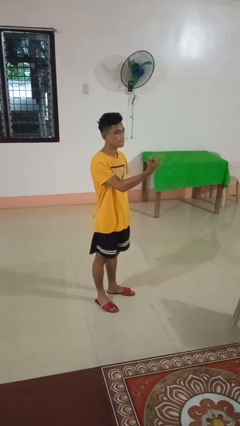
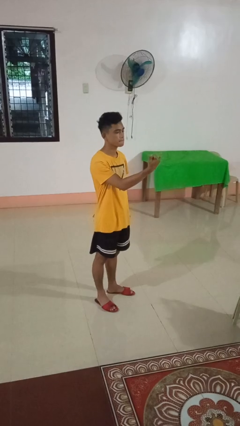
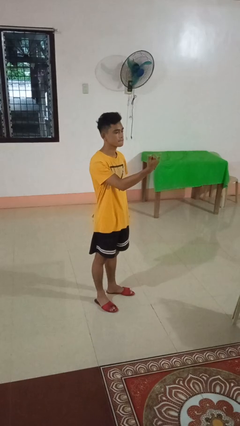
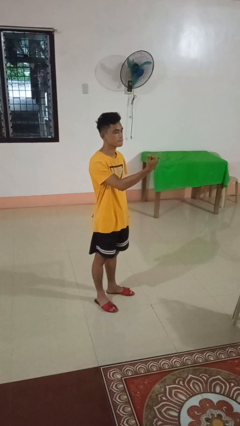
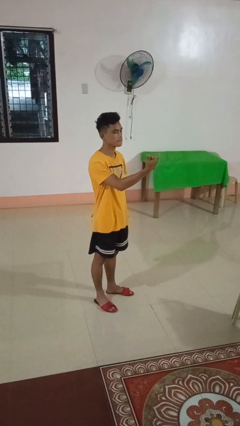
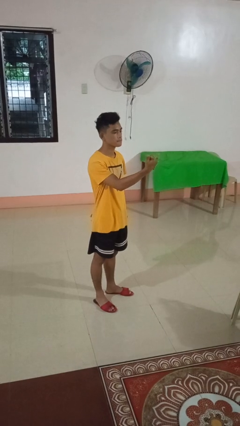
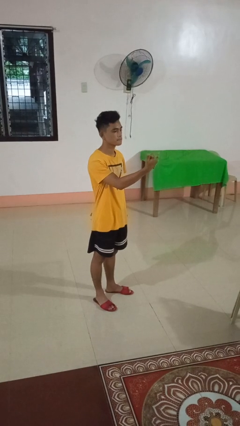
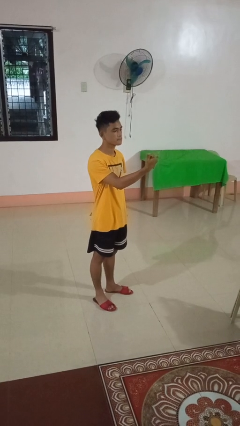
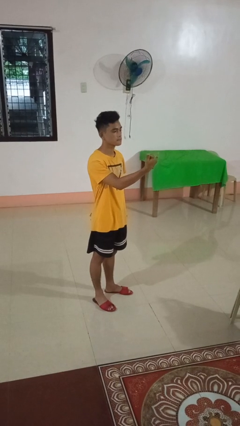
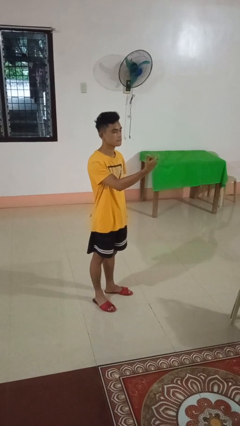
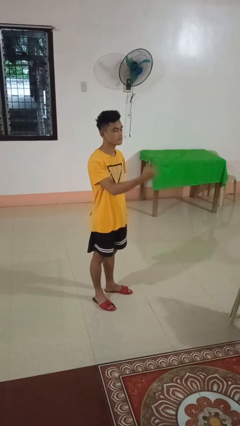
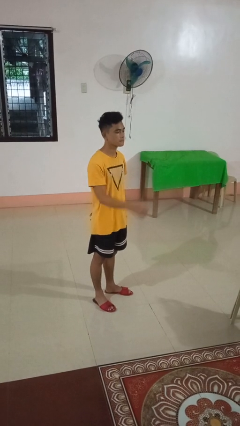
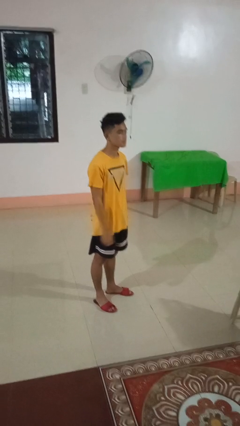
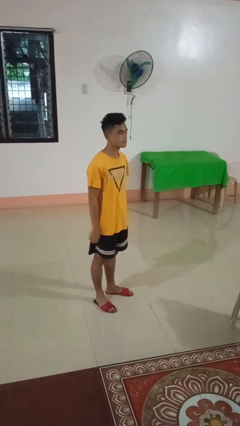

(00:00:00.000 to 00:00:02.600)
person gestures hang loose

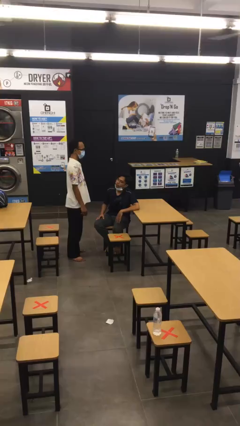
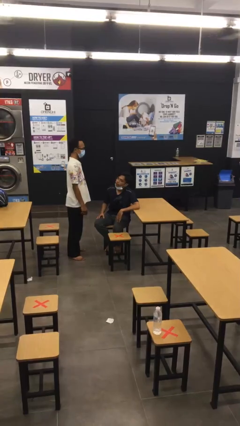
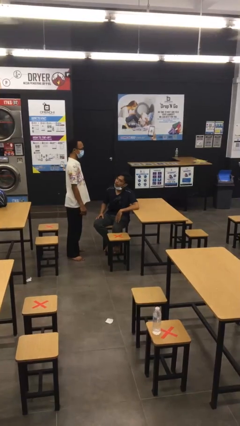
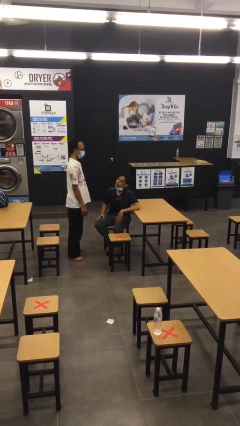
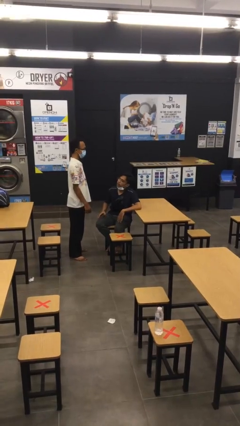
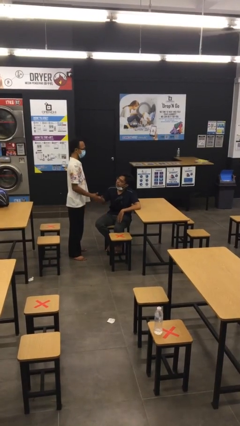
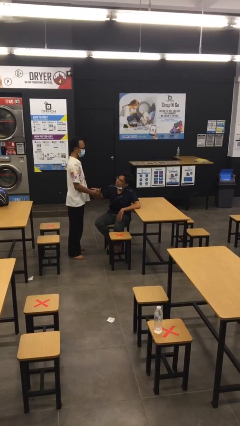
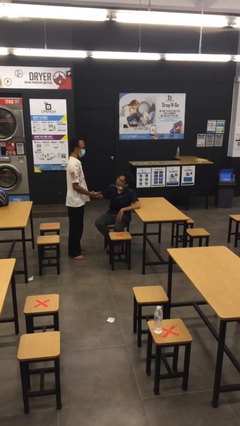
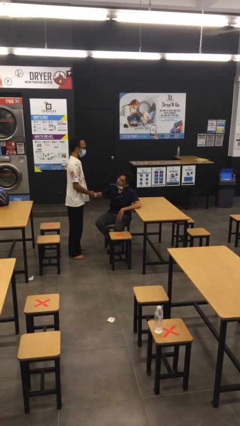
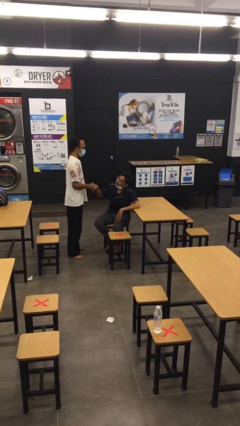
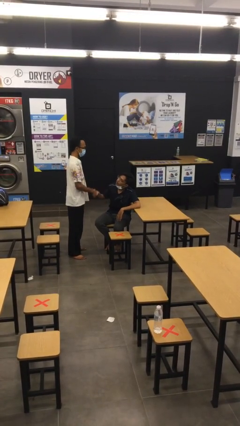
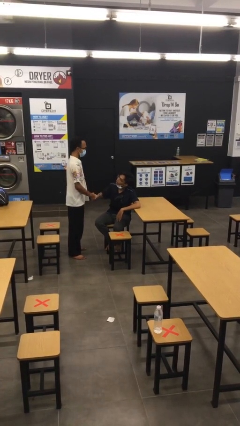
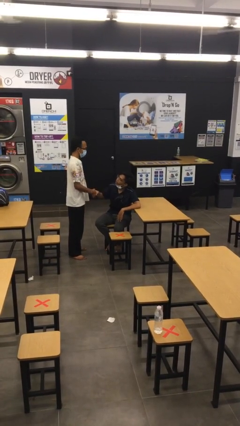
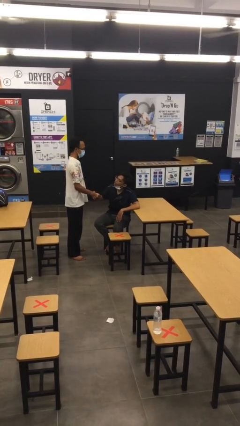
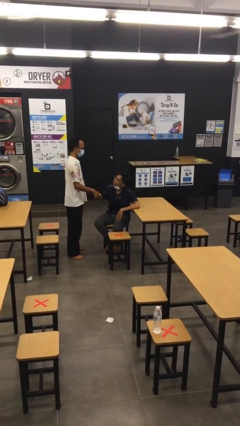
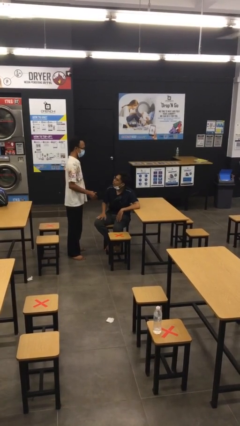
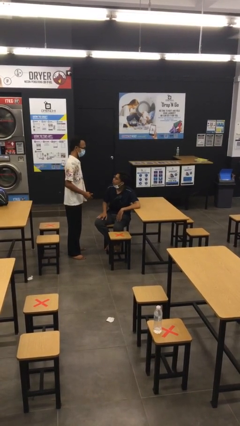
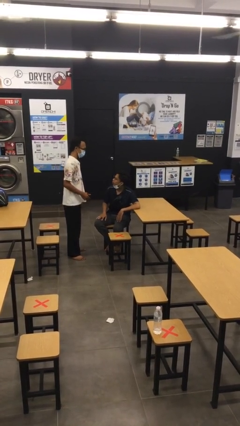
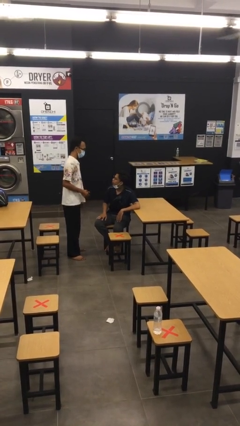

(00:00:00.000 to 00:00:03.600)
person shakes hand

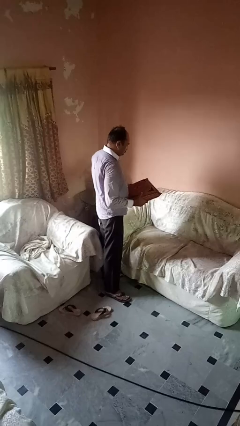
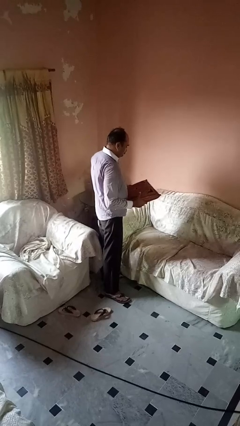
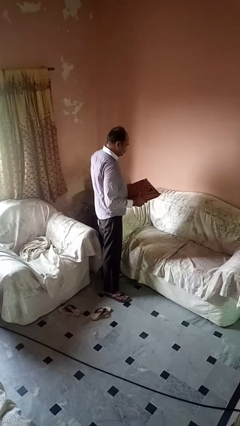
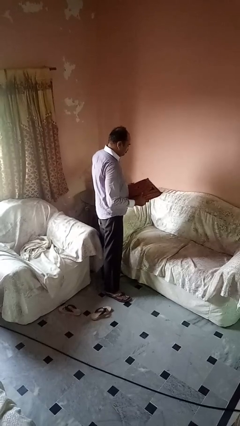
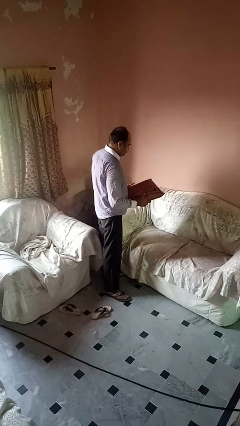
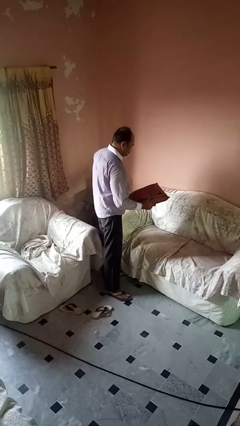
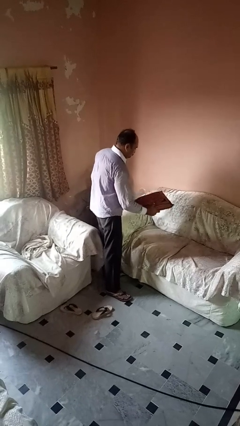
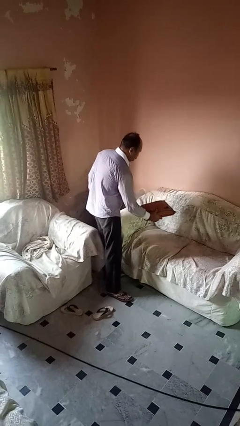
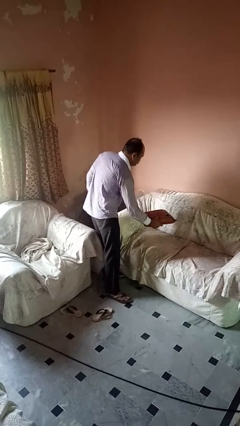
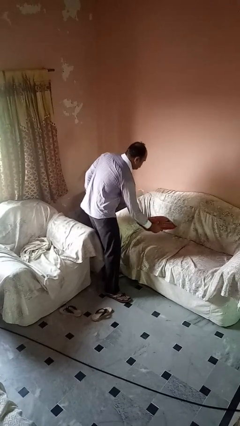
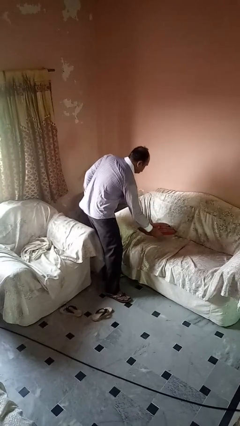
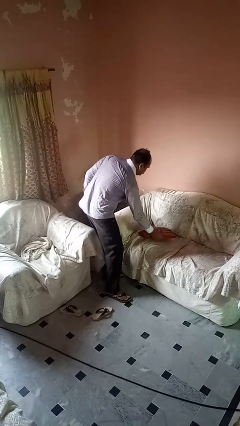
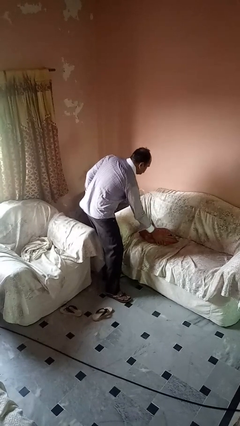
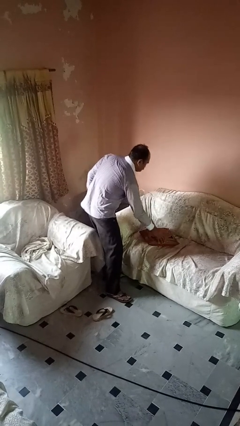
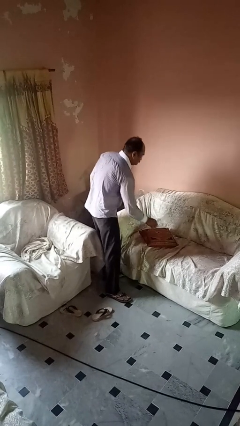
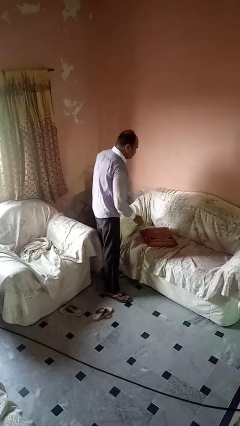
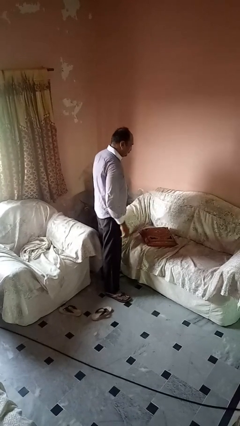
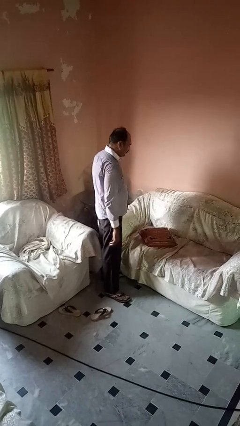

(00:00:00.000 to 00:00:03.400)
person puts down object on couch

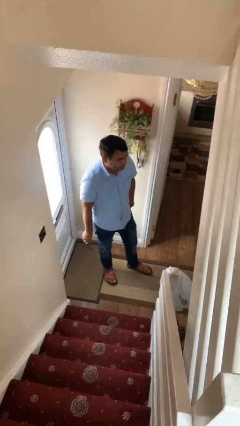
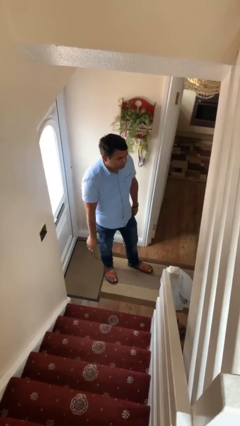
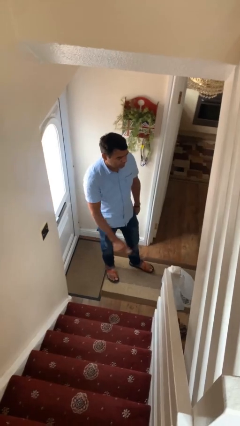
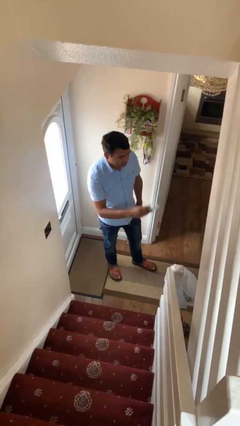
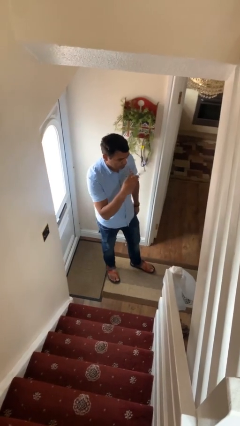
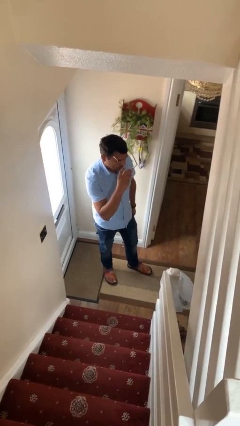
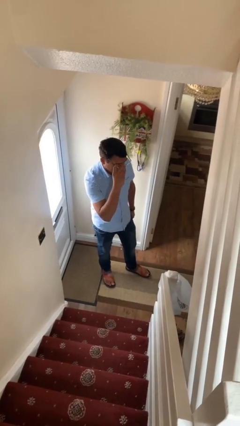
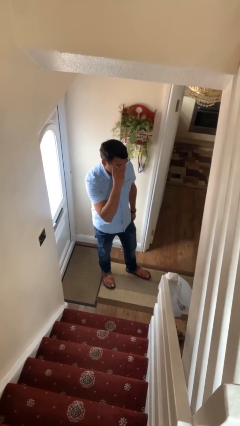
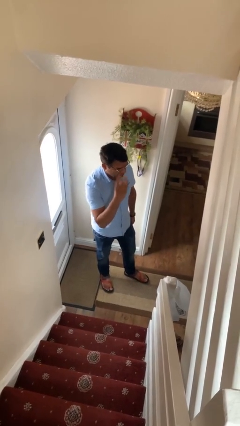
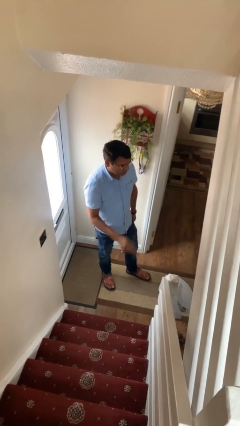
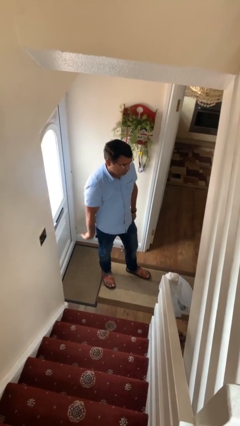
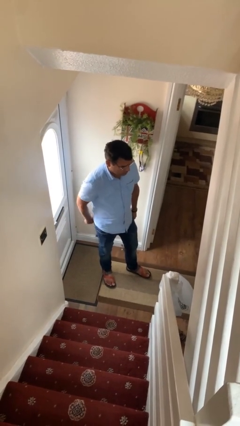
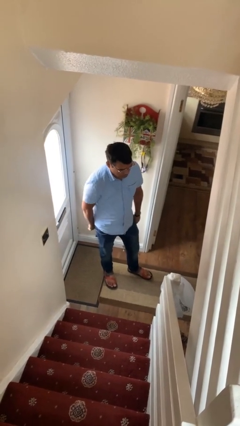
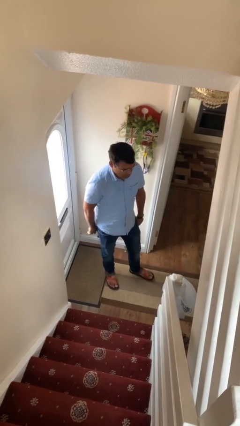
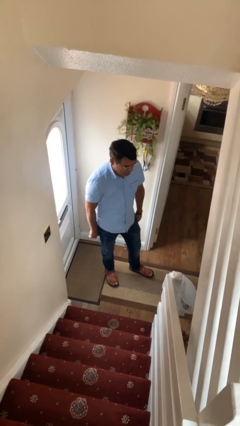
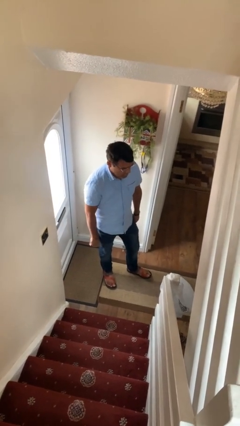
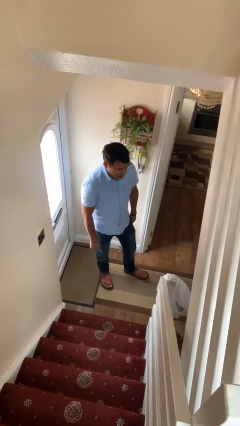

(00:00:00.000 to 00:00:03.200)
person puts on glasses

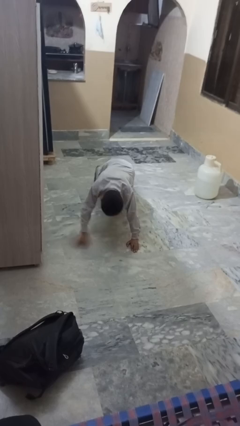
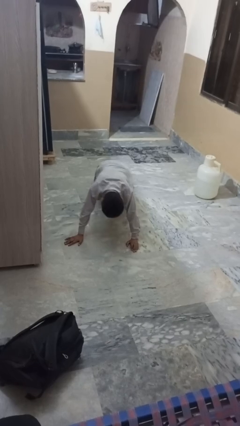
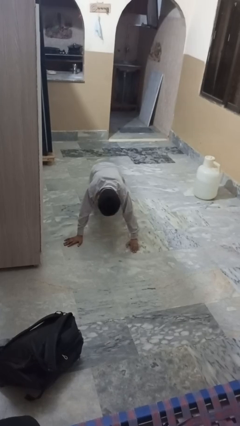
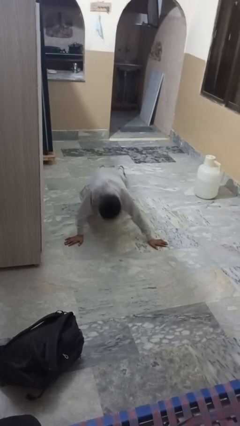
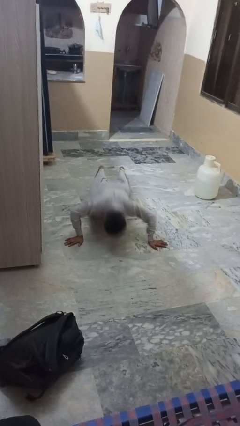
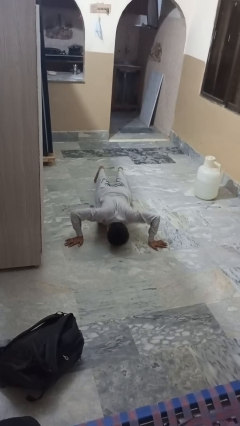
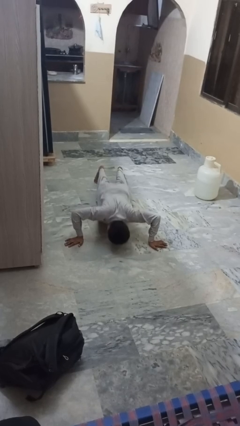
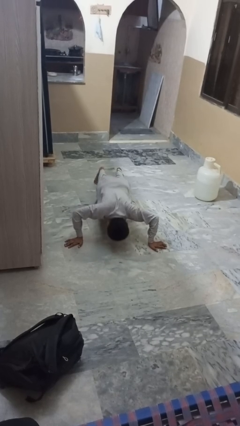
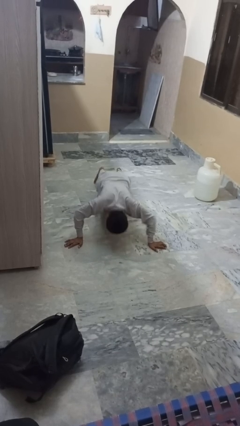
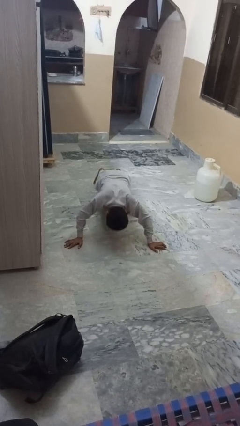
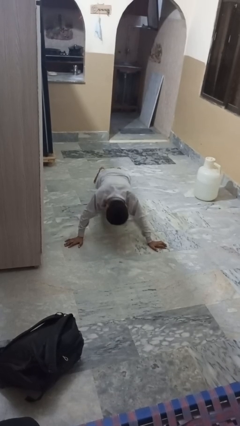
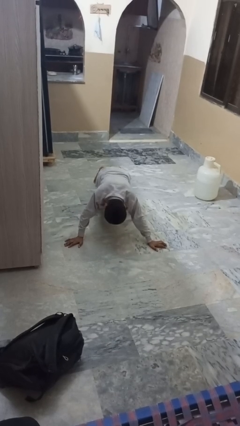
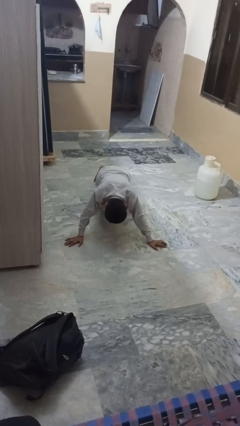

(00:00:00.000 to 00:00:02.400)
person exercises with pushup

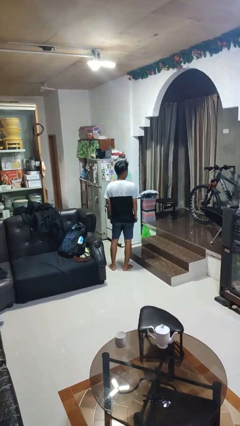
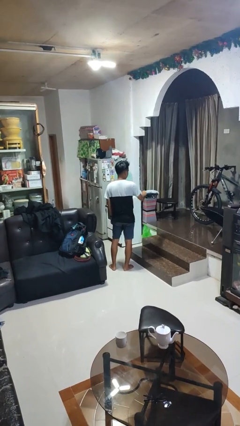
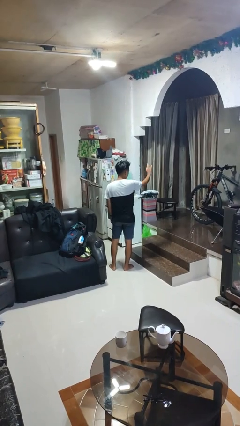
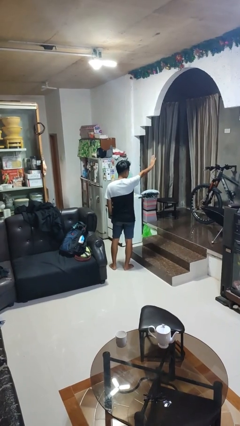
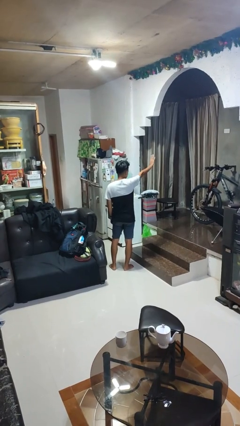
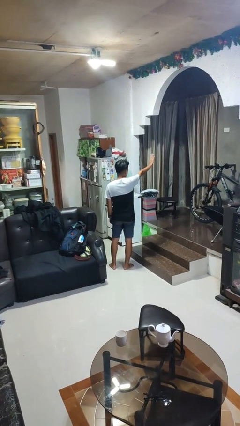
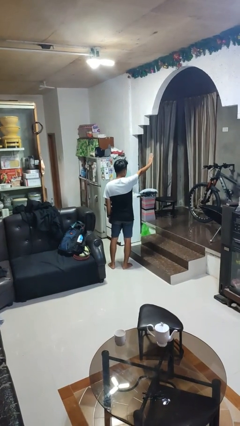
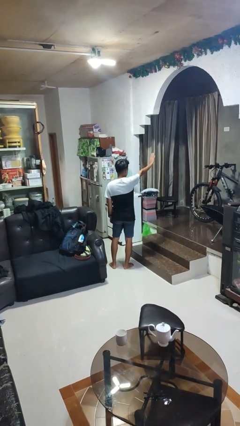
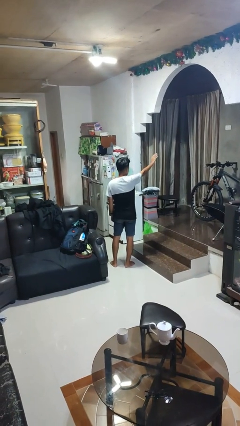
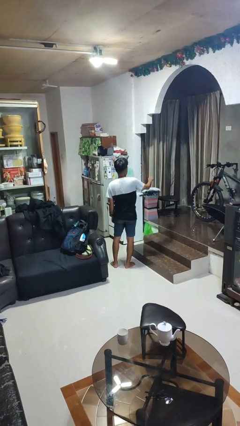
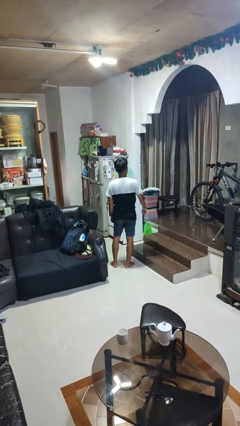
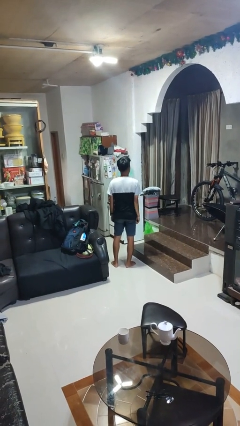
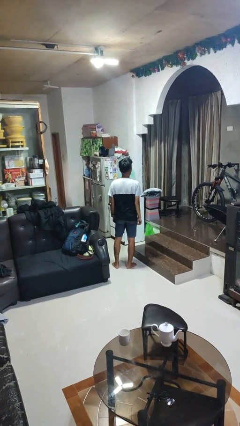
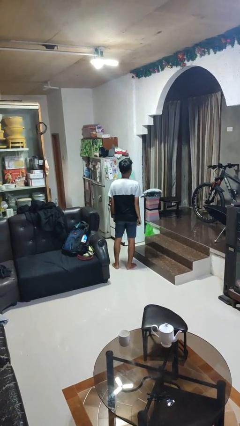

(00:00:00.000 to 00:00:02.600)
person gestures stop
